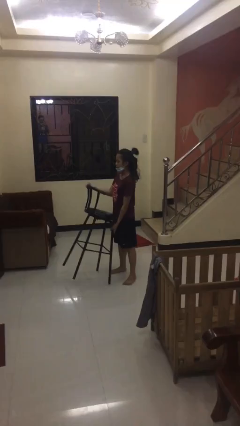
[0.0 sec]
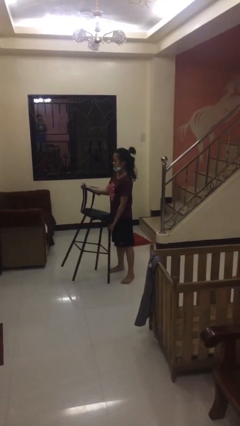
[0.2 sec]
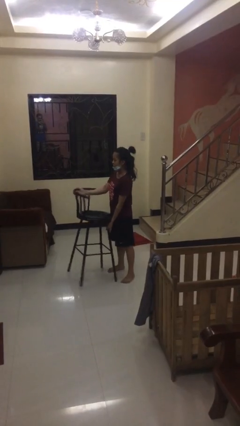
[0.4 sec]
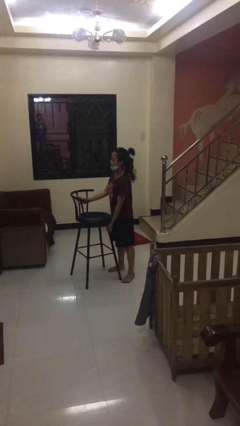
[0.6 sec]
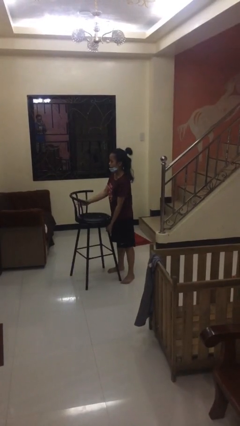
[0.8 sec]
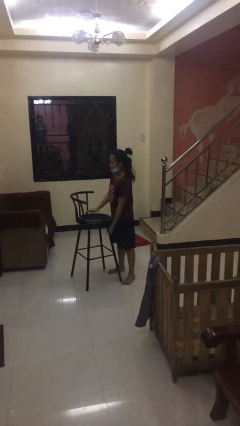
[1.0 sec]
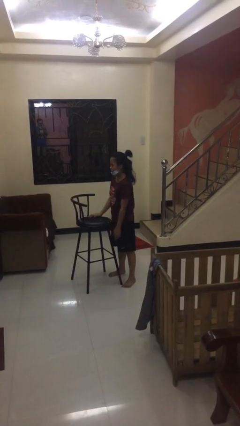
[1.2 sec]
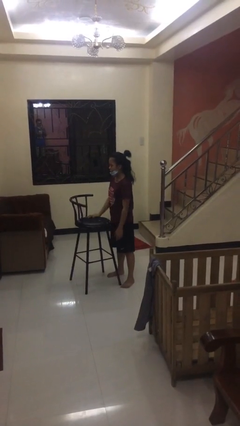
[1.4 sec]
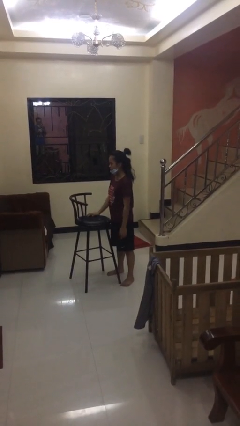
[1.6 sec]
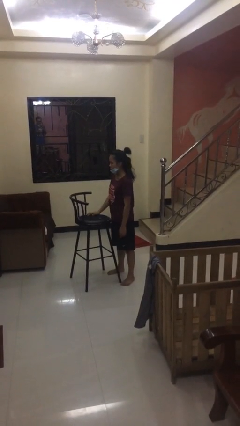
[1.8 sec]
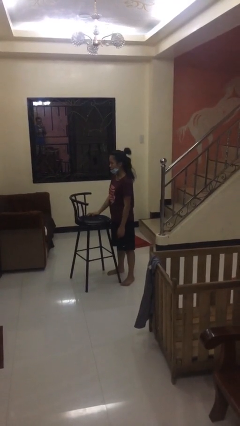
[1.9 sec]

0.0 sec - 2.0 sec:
person puts down object on floor

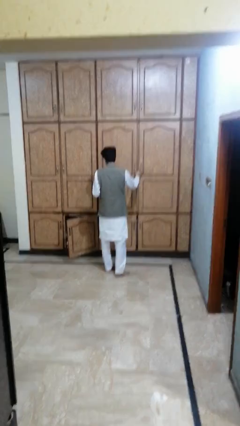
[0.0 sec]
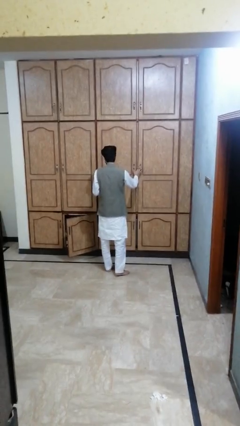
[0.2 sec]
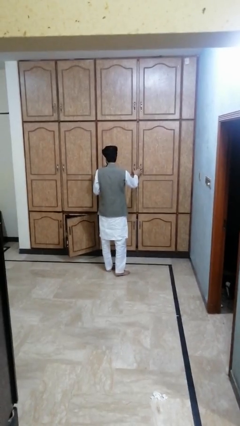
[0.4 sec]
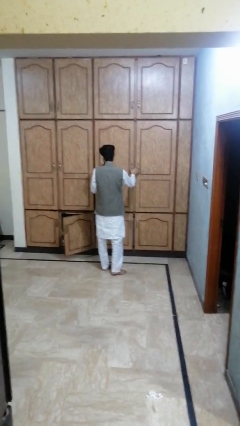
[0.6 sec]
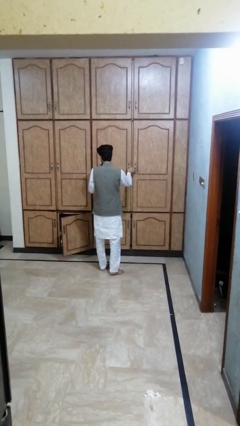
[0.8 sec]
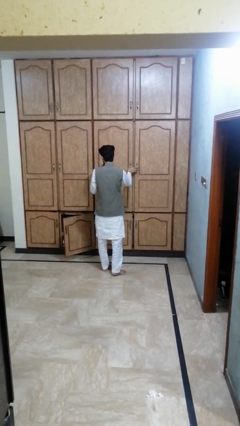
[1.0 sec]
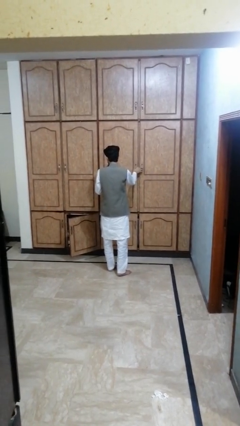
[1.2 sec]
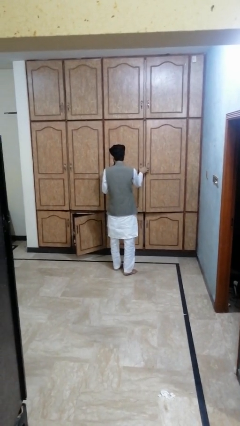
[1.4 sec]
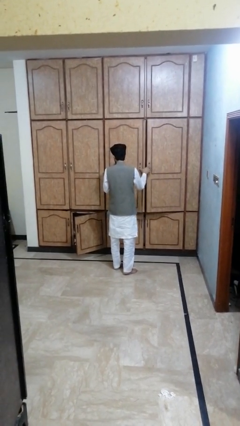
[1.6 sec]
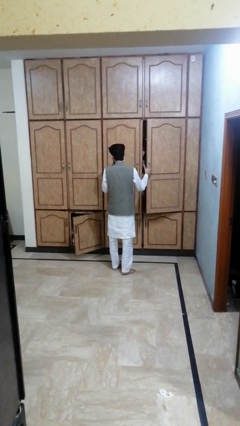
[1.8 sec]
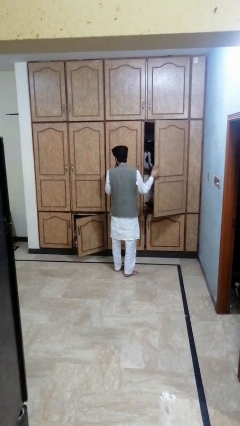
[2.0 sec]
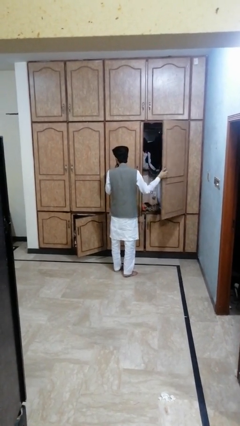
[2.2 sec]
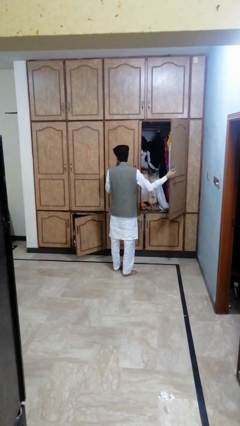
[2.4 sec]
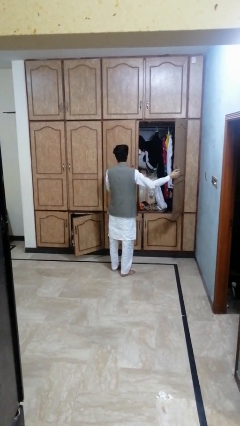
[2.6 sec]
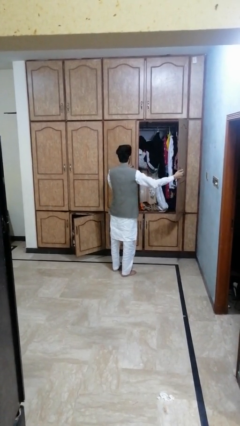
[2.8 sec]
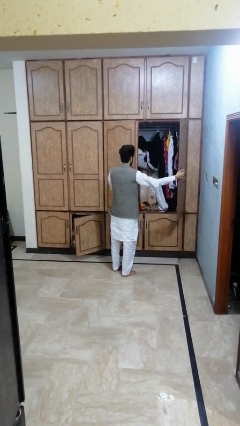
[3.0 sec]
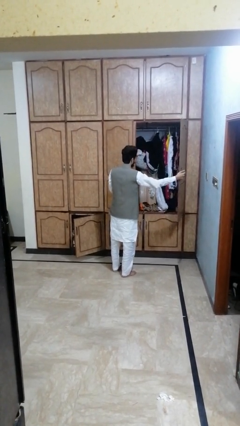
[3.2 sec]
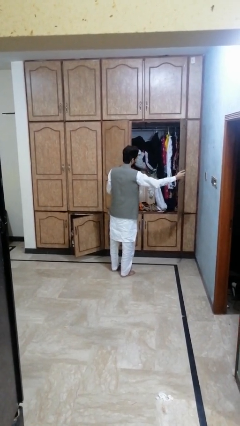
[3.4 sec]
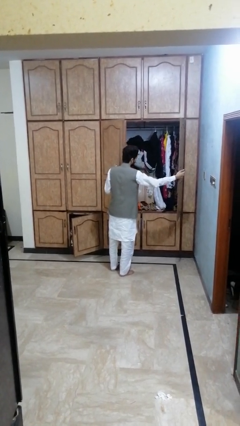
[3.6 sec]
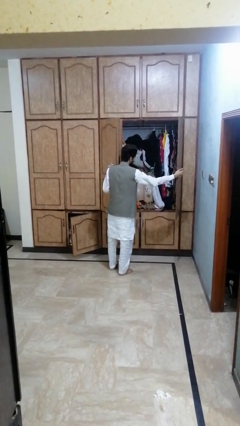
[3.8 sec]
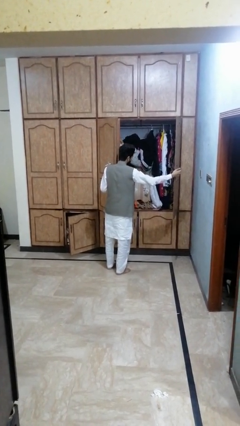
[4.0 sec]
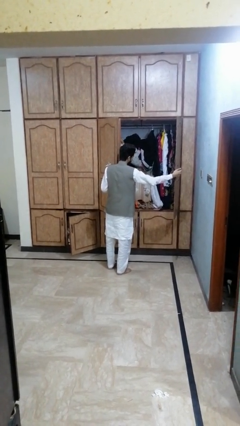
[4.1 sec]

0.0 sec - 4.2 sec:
person opens dresser drawer

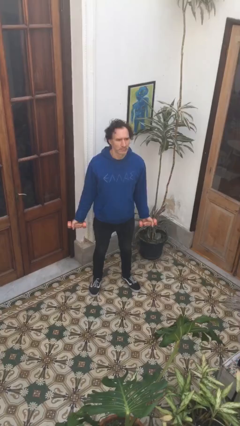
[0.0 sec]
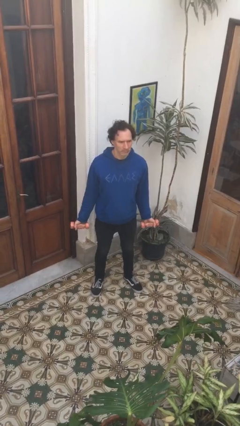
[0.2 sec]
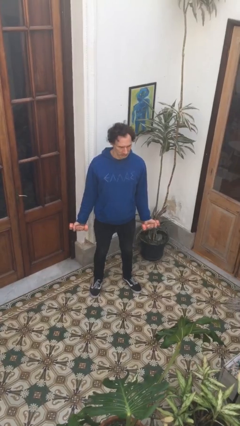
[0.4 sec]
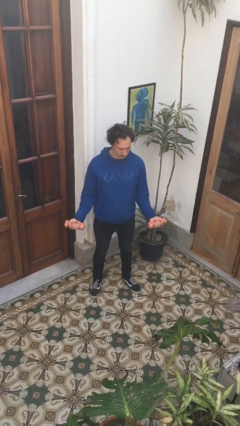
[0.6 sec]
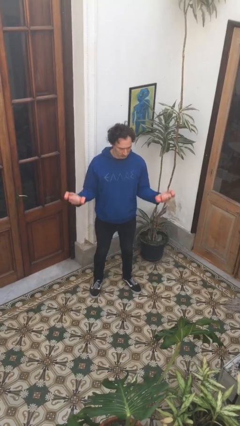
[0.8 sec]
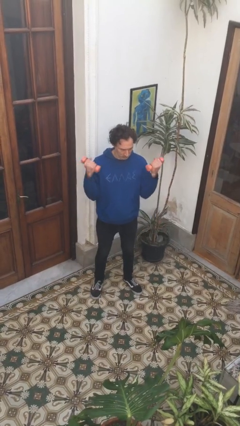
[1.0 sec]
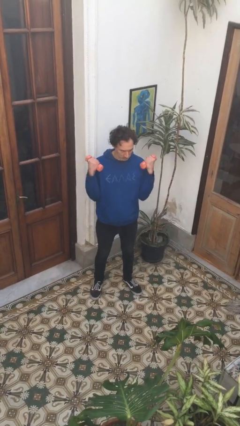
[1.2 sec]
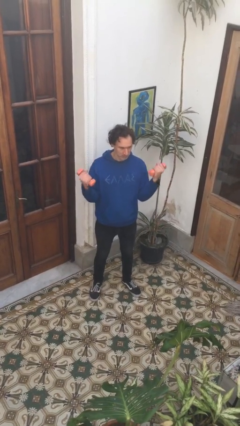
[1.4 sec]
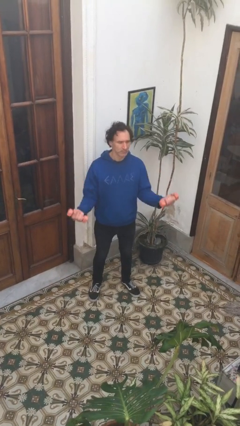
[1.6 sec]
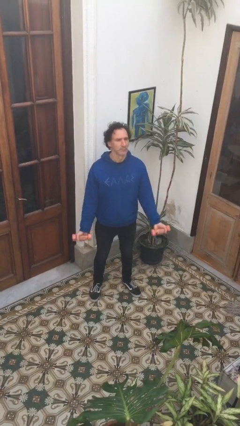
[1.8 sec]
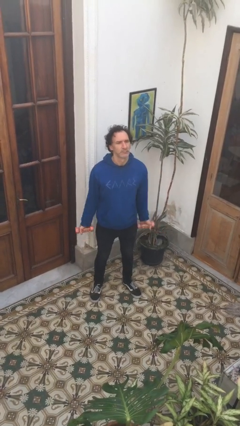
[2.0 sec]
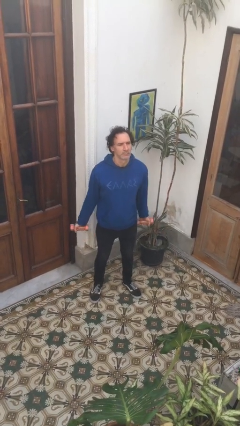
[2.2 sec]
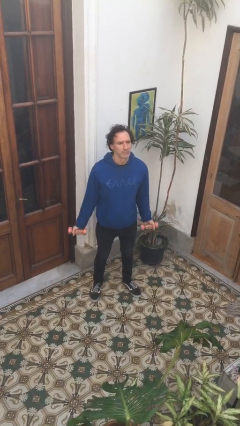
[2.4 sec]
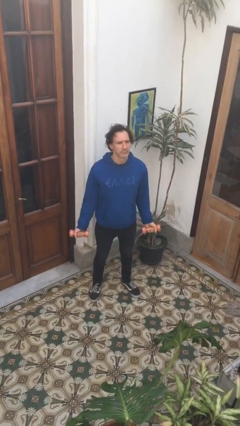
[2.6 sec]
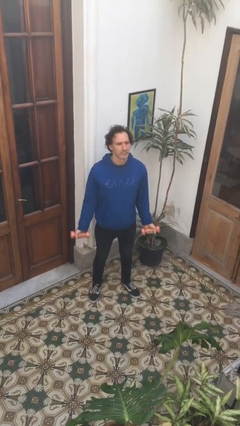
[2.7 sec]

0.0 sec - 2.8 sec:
person lifts dumbbells

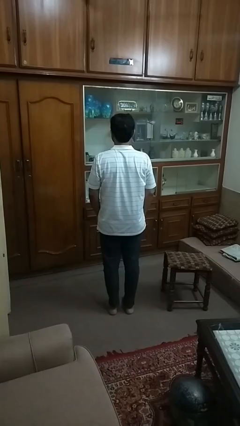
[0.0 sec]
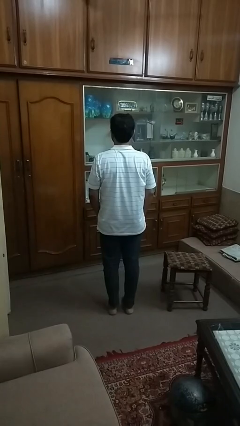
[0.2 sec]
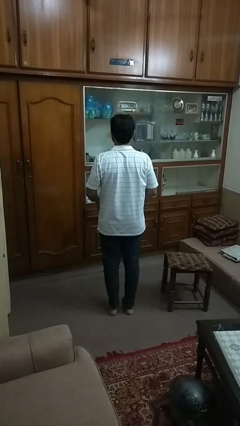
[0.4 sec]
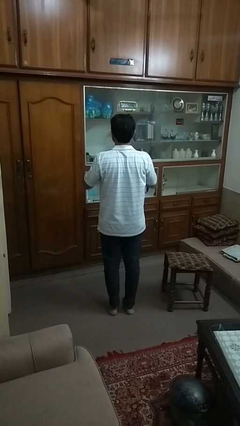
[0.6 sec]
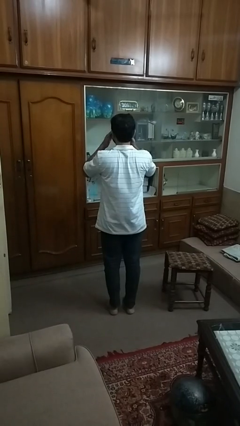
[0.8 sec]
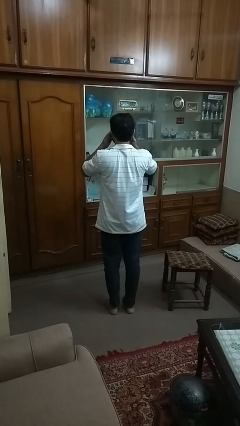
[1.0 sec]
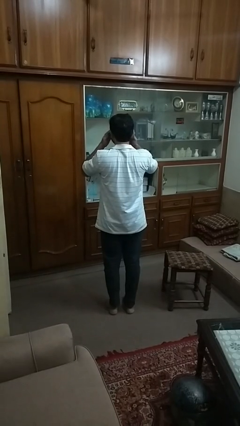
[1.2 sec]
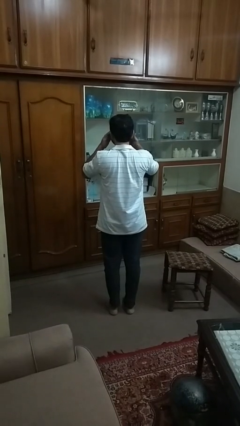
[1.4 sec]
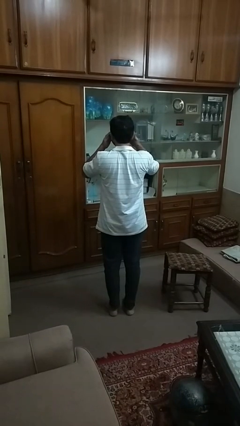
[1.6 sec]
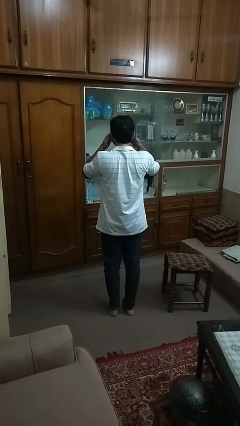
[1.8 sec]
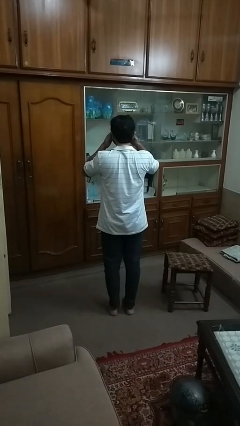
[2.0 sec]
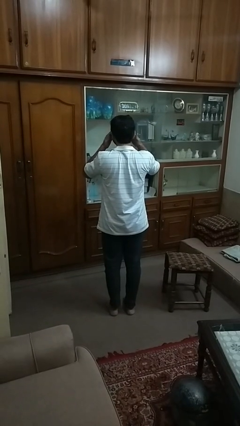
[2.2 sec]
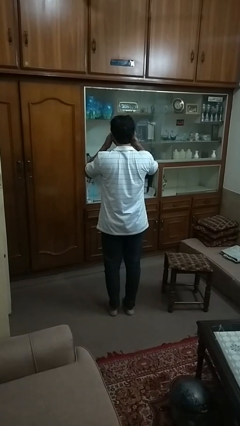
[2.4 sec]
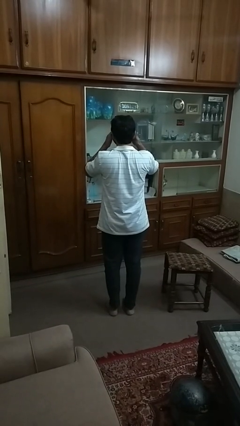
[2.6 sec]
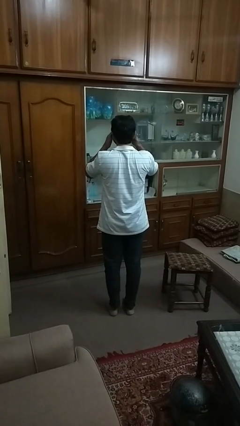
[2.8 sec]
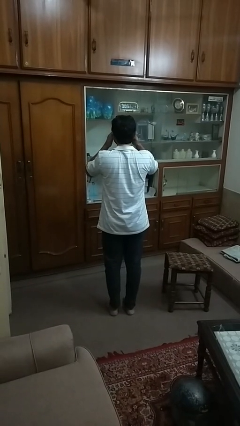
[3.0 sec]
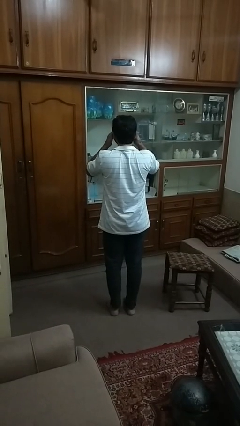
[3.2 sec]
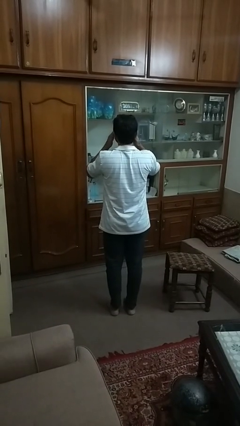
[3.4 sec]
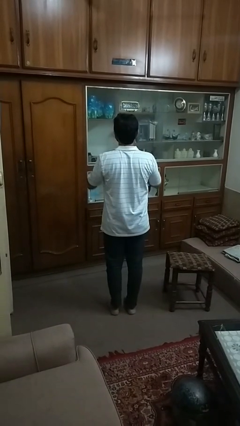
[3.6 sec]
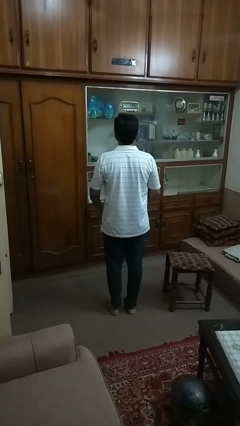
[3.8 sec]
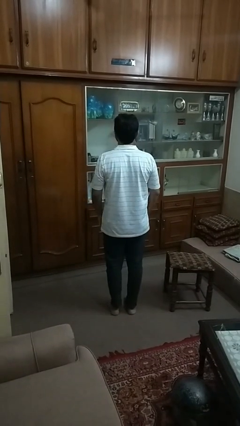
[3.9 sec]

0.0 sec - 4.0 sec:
person rubs eyes

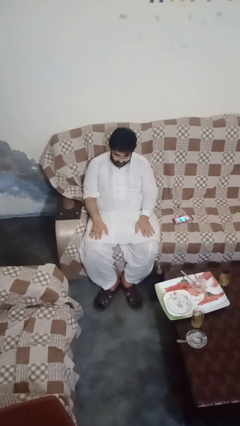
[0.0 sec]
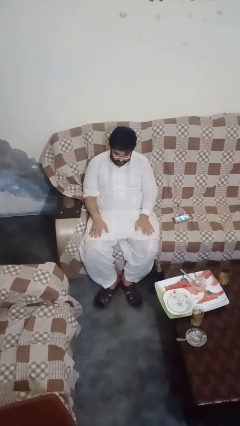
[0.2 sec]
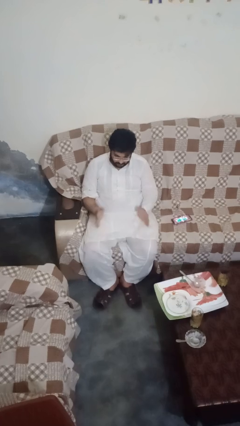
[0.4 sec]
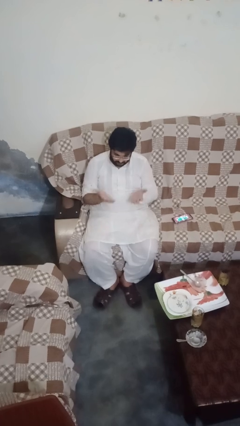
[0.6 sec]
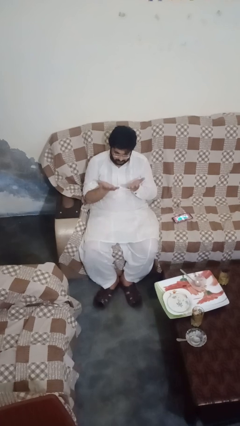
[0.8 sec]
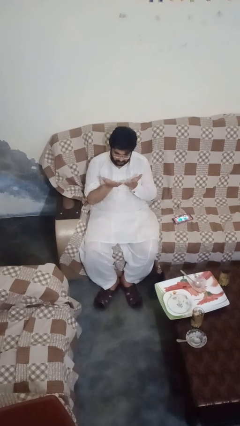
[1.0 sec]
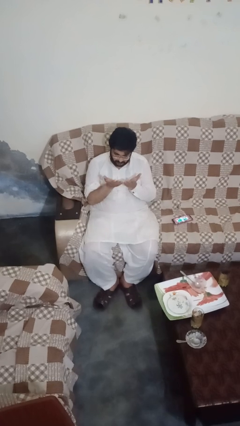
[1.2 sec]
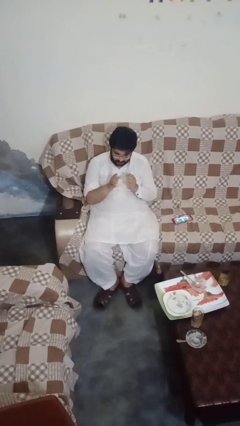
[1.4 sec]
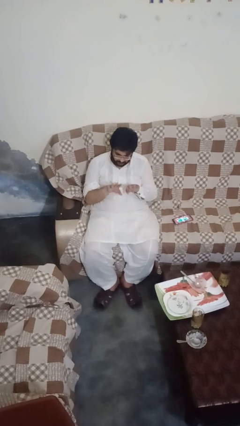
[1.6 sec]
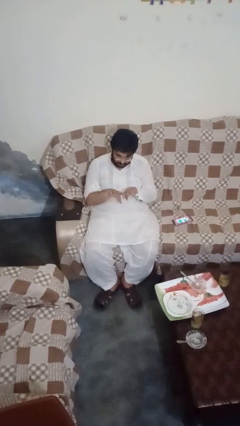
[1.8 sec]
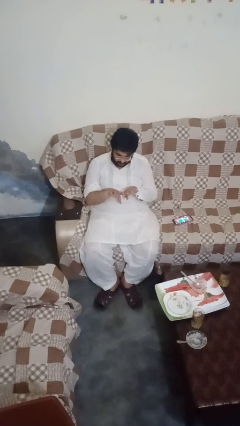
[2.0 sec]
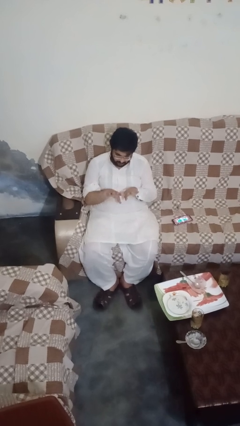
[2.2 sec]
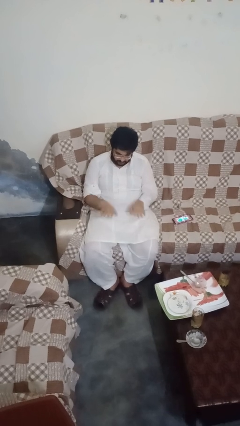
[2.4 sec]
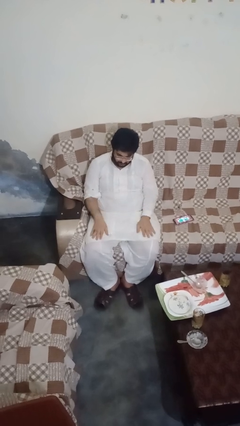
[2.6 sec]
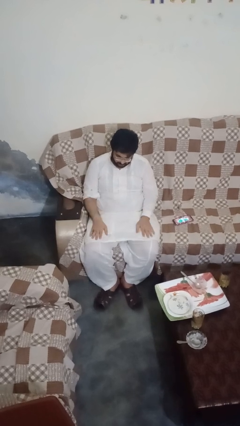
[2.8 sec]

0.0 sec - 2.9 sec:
person looks at hands in lap

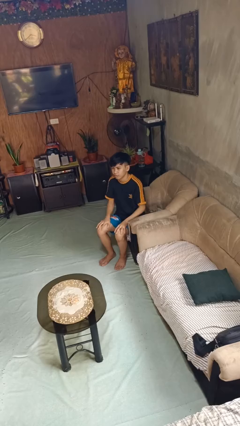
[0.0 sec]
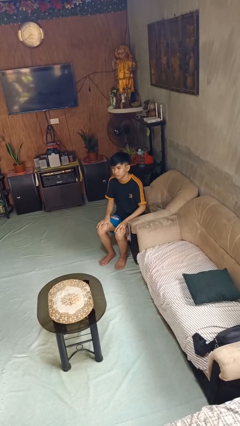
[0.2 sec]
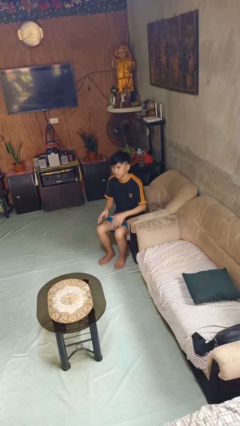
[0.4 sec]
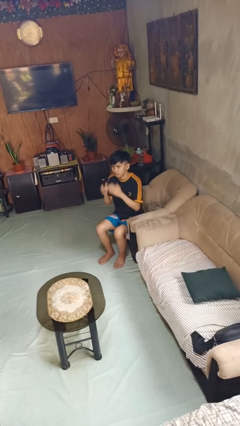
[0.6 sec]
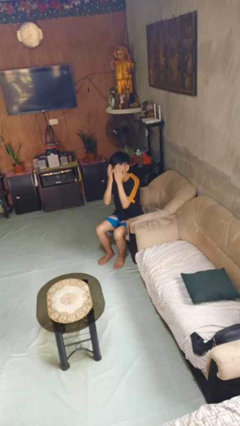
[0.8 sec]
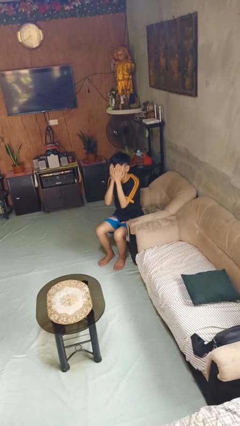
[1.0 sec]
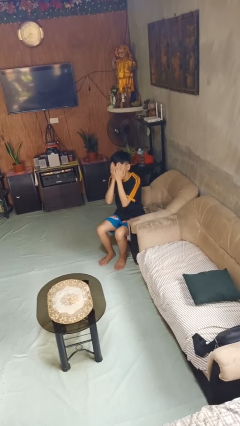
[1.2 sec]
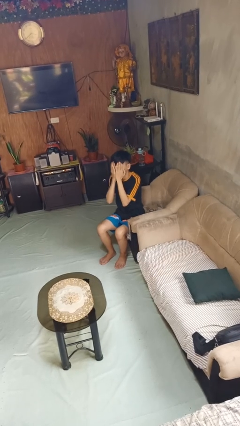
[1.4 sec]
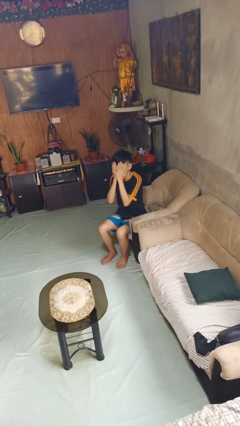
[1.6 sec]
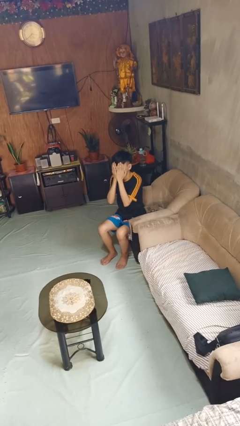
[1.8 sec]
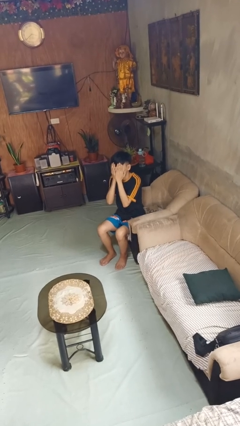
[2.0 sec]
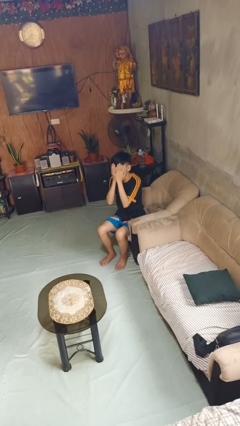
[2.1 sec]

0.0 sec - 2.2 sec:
person covers face with hands
